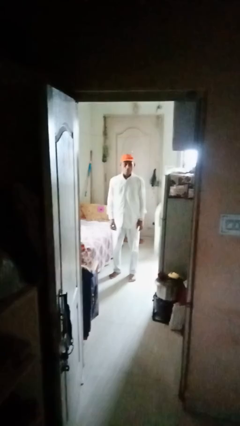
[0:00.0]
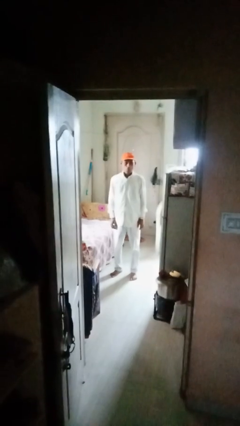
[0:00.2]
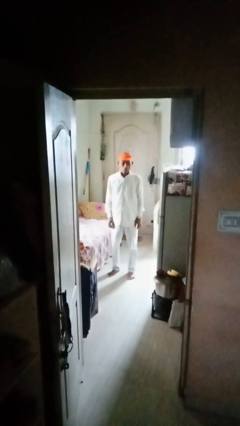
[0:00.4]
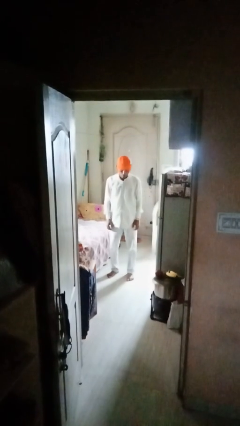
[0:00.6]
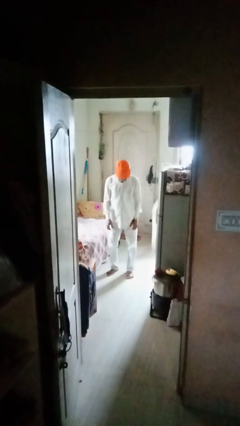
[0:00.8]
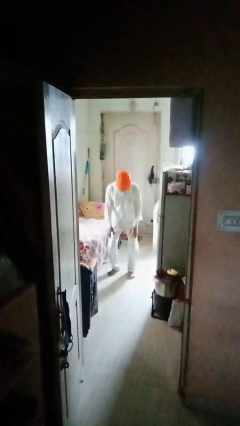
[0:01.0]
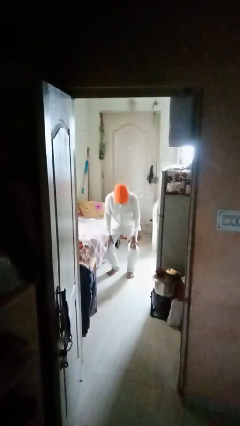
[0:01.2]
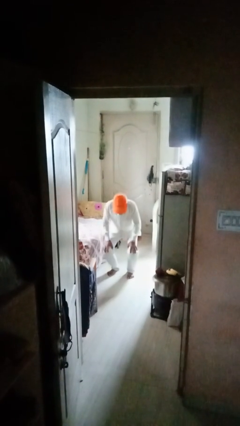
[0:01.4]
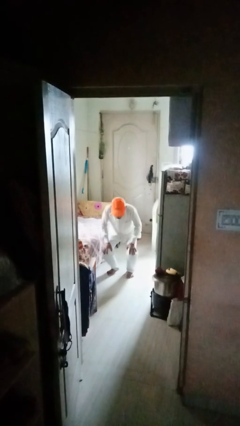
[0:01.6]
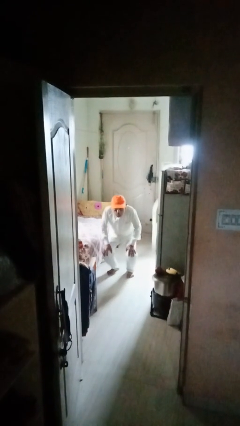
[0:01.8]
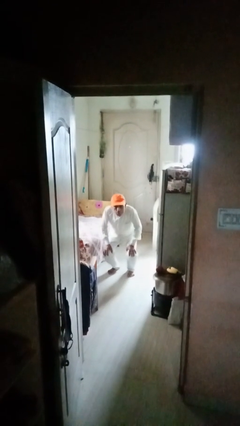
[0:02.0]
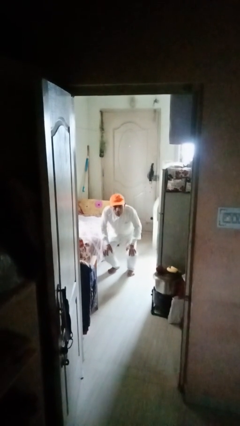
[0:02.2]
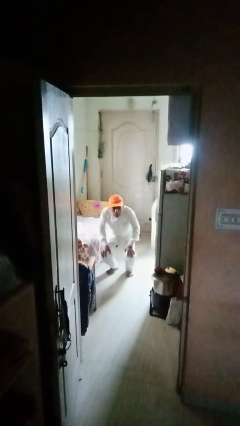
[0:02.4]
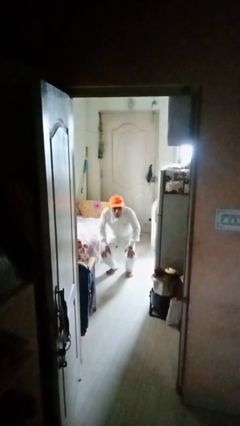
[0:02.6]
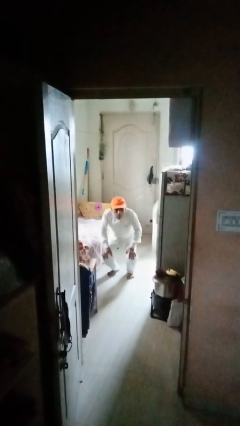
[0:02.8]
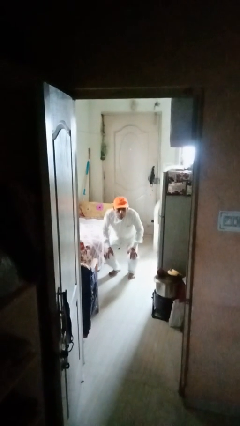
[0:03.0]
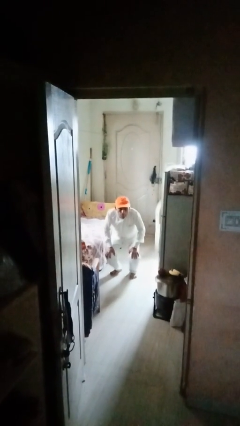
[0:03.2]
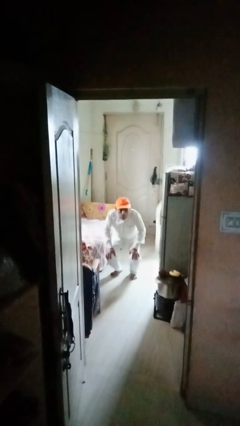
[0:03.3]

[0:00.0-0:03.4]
person squats

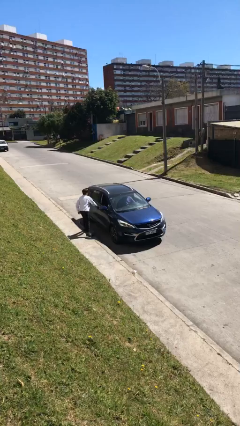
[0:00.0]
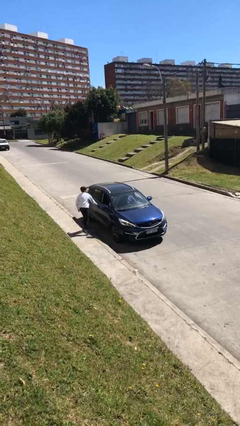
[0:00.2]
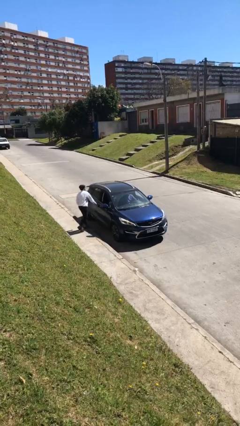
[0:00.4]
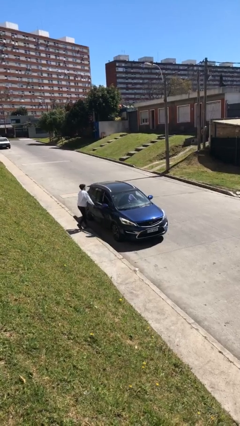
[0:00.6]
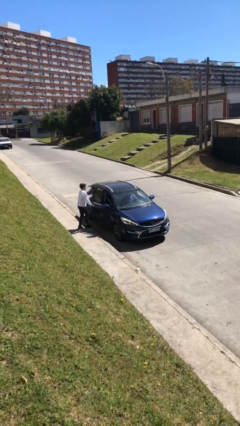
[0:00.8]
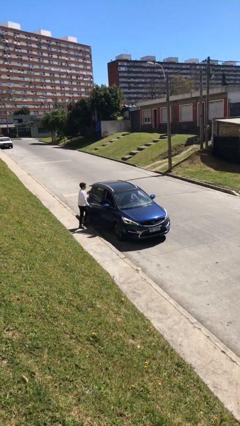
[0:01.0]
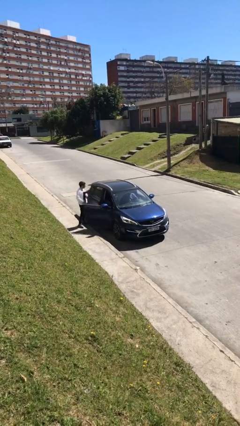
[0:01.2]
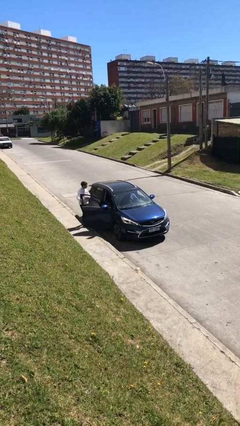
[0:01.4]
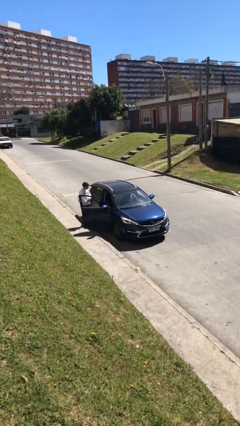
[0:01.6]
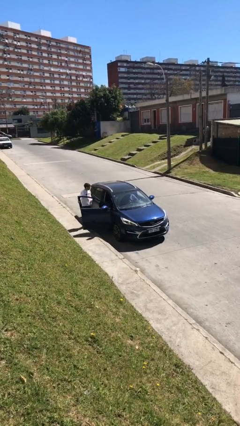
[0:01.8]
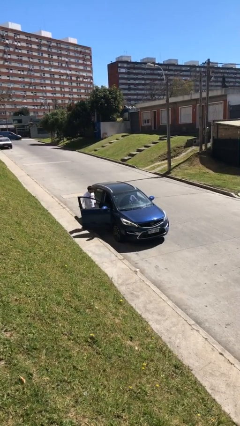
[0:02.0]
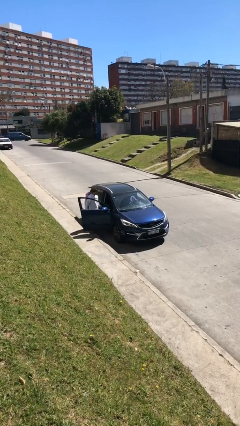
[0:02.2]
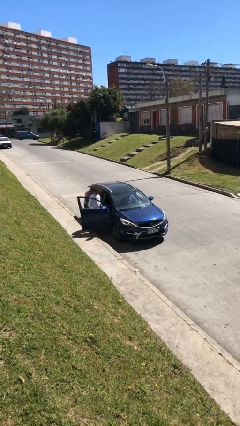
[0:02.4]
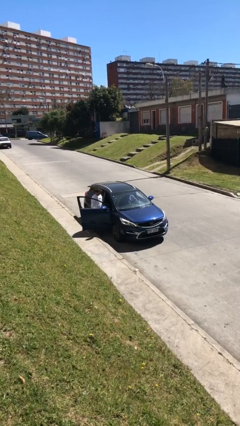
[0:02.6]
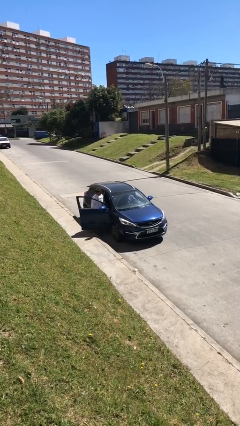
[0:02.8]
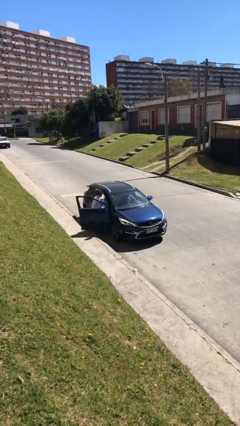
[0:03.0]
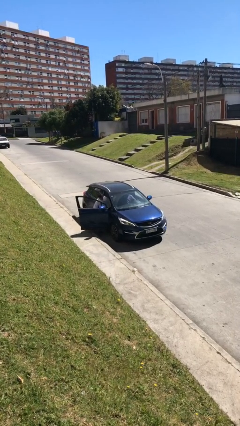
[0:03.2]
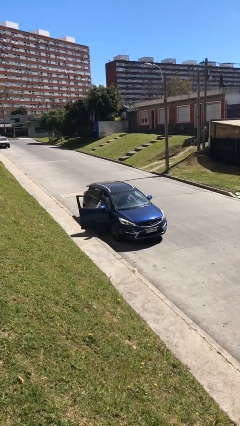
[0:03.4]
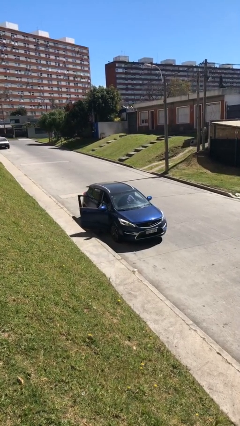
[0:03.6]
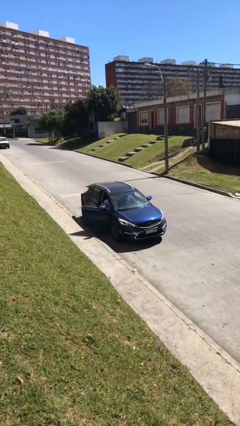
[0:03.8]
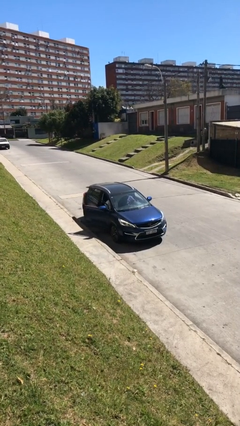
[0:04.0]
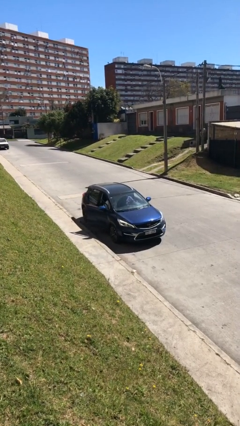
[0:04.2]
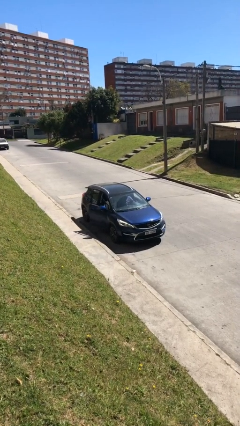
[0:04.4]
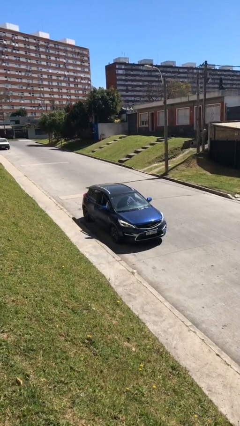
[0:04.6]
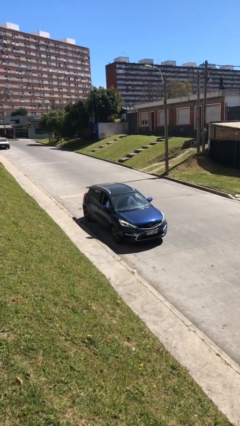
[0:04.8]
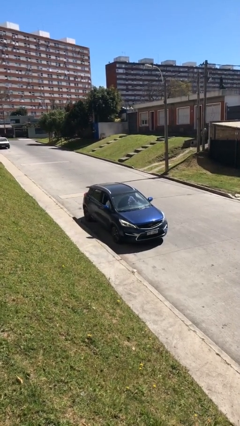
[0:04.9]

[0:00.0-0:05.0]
car picks up person

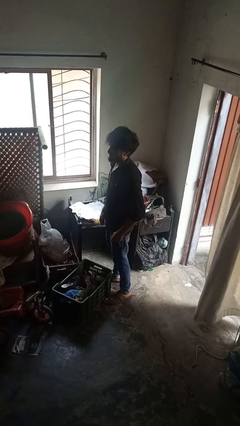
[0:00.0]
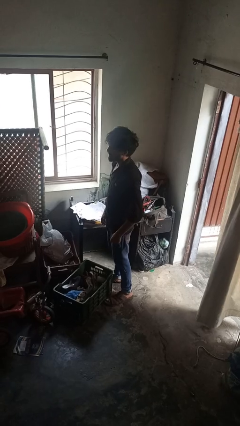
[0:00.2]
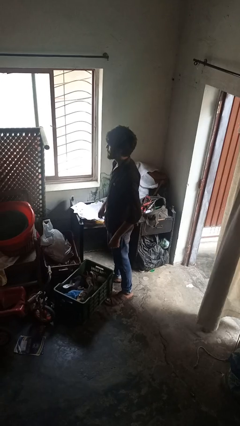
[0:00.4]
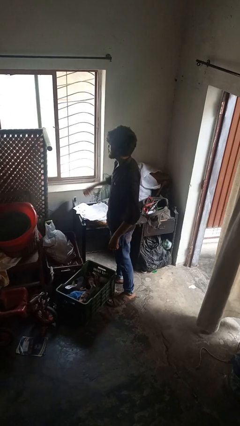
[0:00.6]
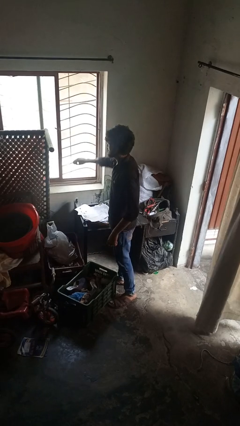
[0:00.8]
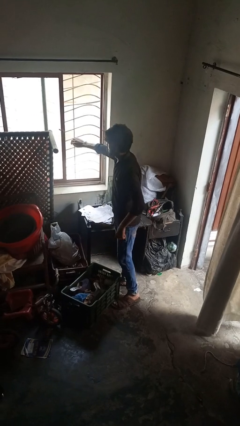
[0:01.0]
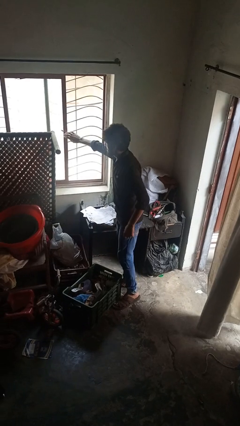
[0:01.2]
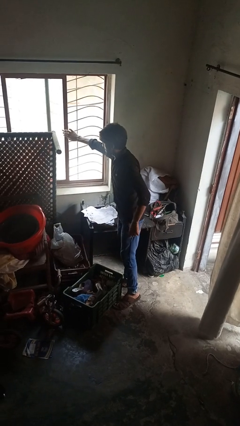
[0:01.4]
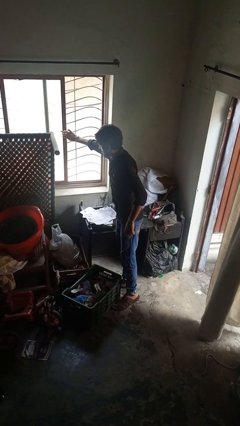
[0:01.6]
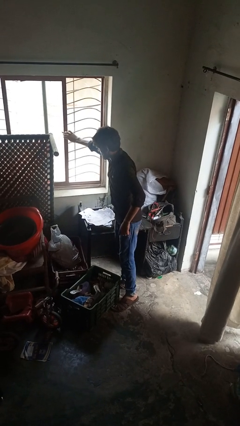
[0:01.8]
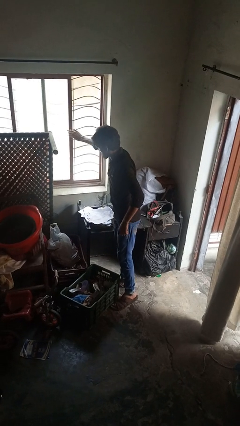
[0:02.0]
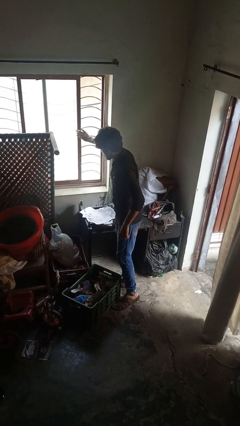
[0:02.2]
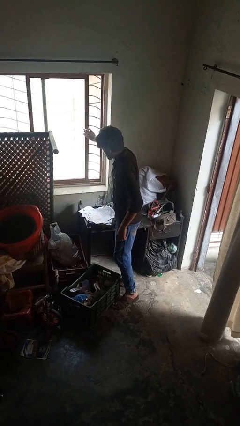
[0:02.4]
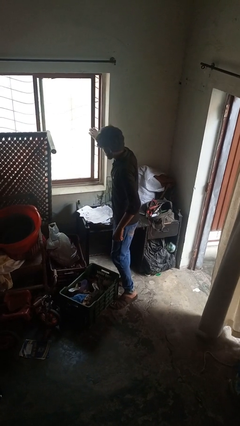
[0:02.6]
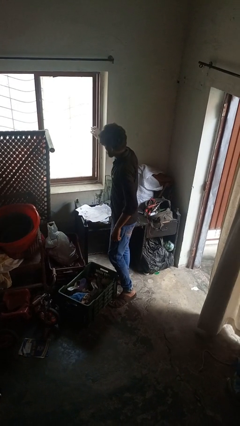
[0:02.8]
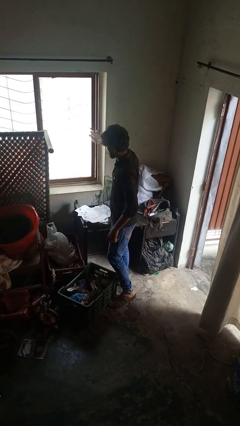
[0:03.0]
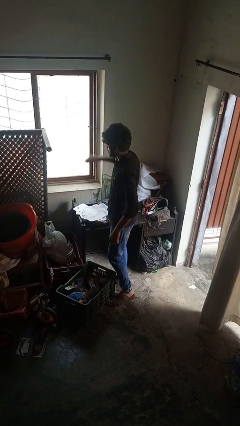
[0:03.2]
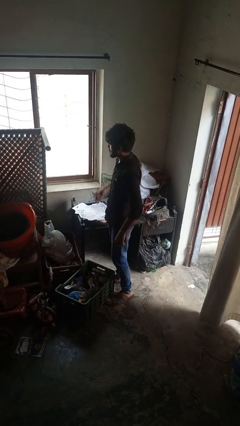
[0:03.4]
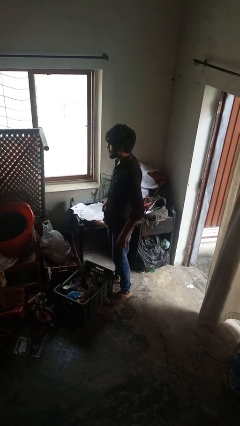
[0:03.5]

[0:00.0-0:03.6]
person closes home window

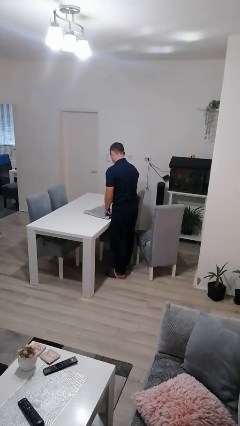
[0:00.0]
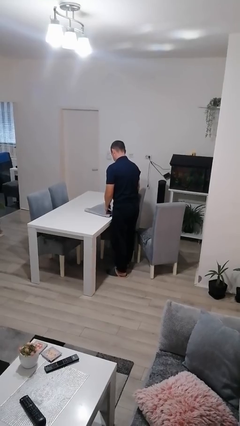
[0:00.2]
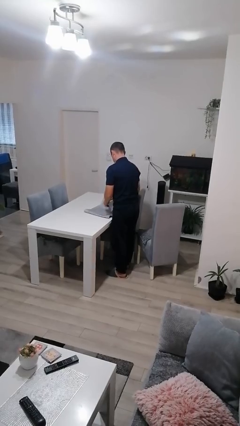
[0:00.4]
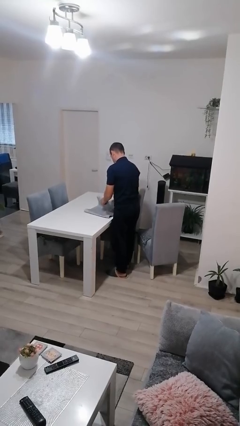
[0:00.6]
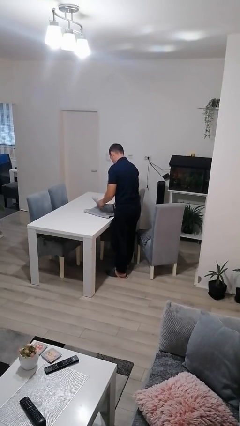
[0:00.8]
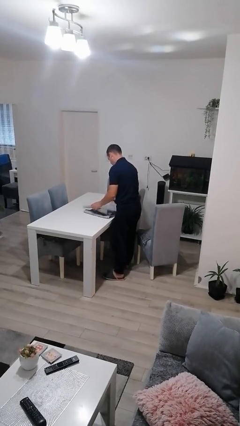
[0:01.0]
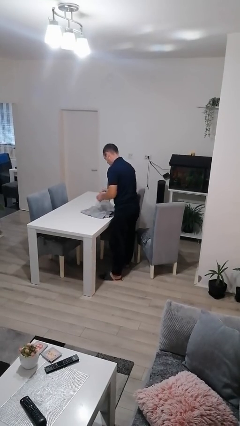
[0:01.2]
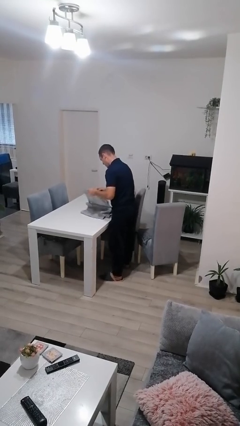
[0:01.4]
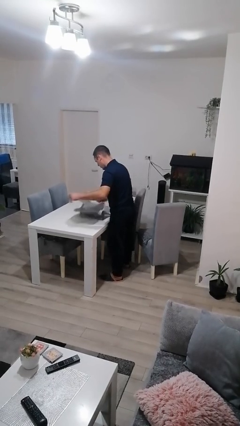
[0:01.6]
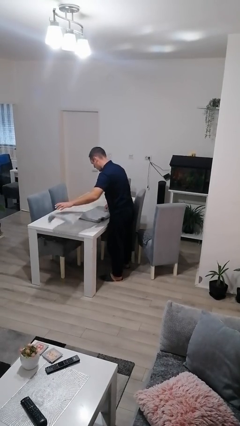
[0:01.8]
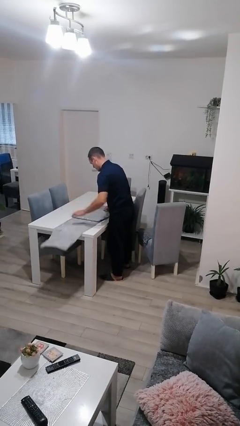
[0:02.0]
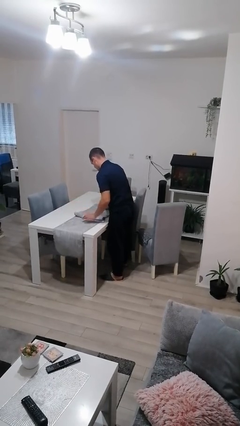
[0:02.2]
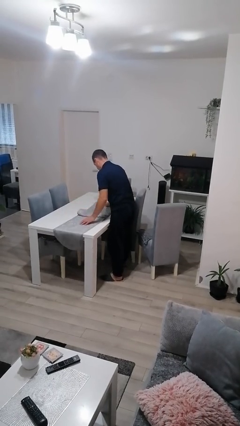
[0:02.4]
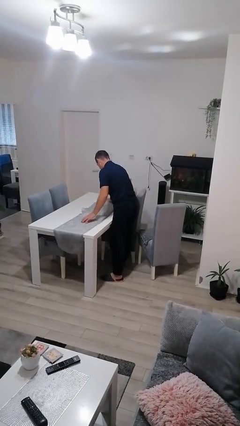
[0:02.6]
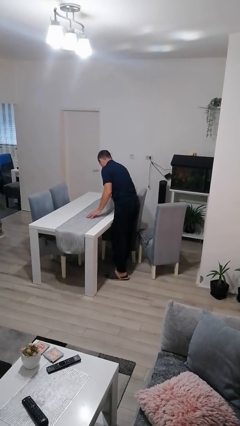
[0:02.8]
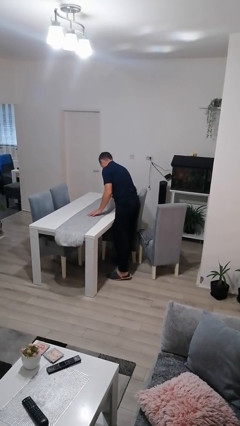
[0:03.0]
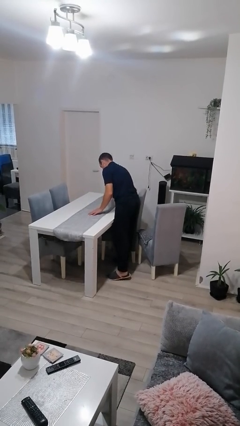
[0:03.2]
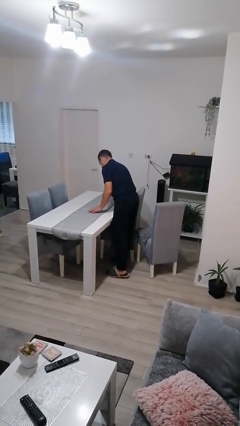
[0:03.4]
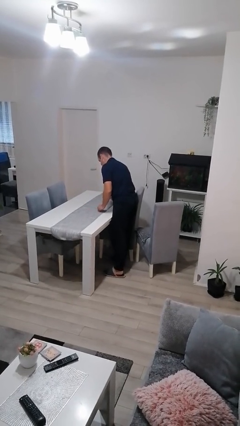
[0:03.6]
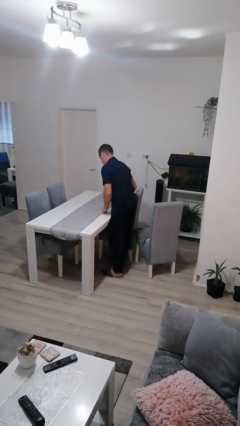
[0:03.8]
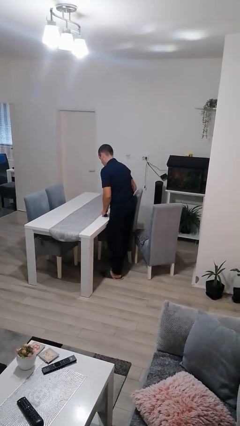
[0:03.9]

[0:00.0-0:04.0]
person spreads tablecloth

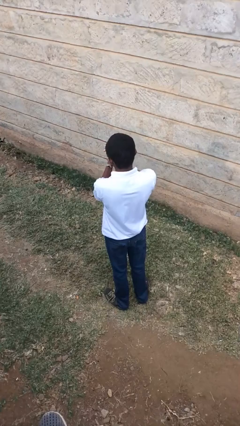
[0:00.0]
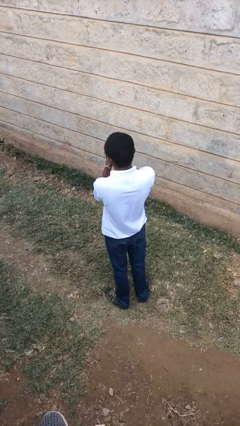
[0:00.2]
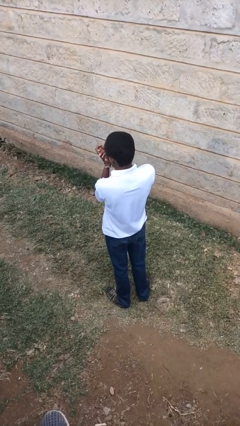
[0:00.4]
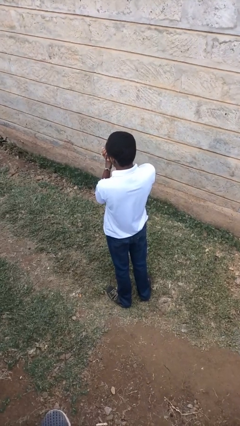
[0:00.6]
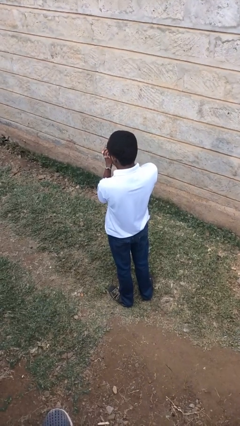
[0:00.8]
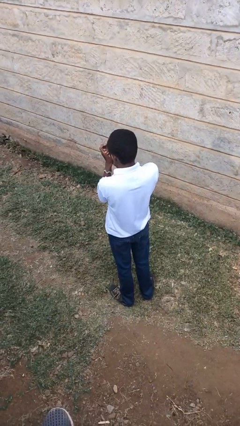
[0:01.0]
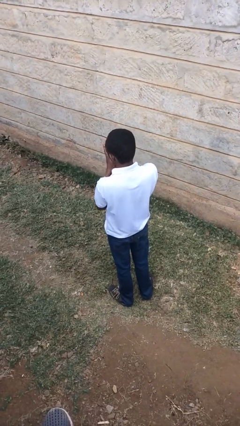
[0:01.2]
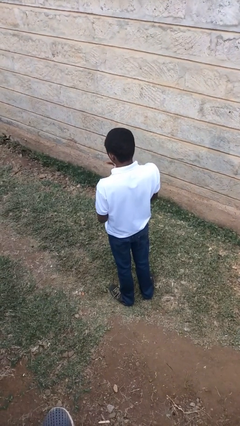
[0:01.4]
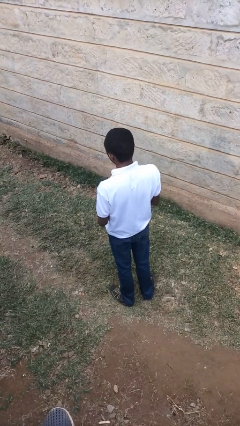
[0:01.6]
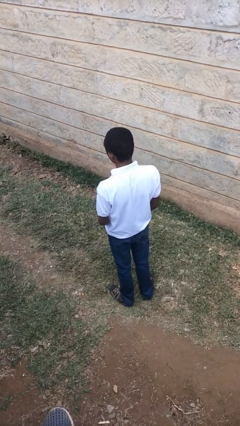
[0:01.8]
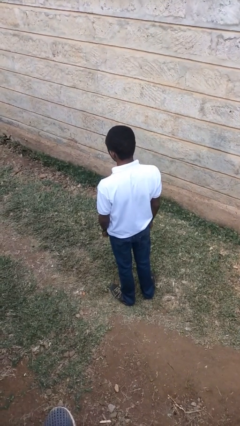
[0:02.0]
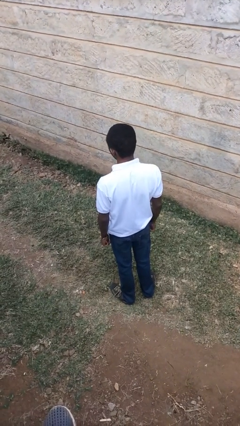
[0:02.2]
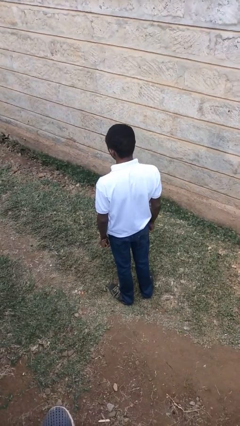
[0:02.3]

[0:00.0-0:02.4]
person blows into hands
